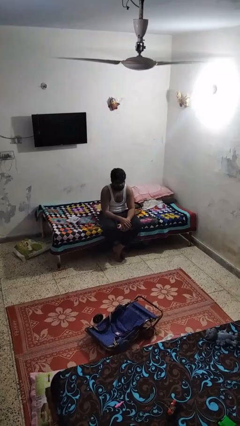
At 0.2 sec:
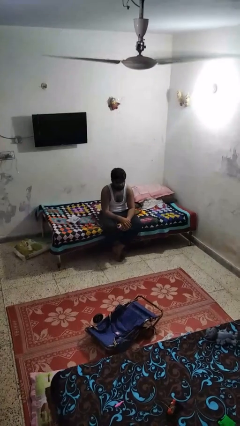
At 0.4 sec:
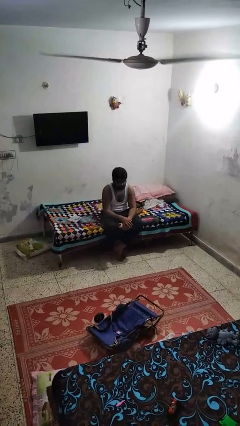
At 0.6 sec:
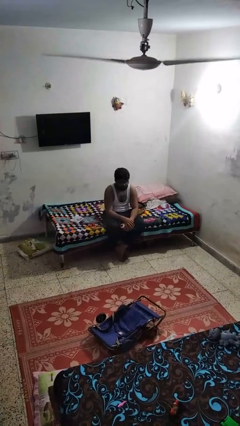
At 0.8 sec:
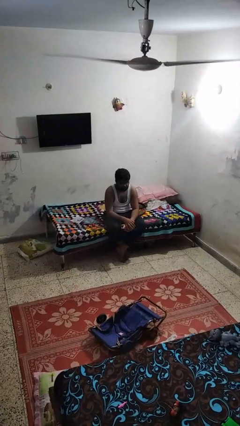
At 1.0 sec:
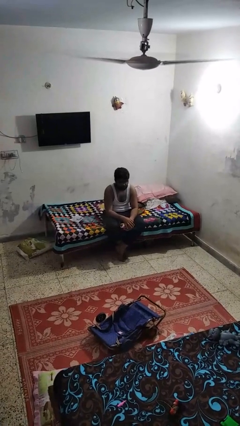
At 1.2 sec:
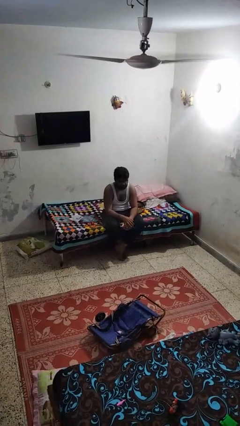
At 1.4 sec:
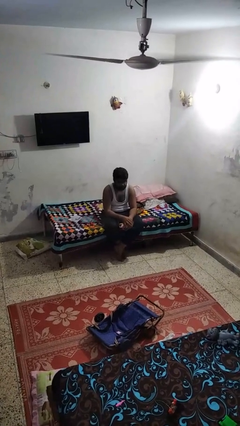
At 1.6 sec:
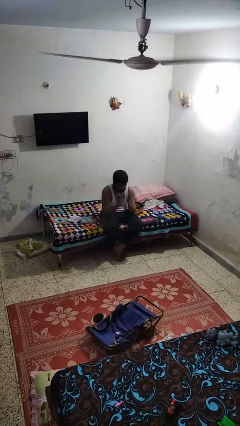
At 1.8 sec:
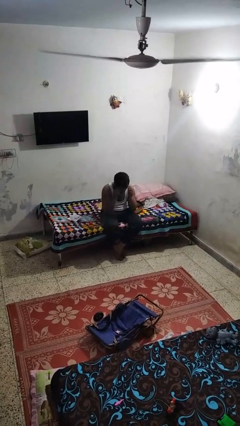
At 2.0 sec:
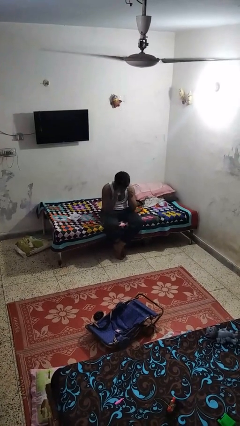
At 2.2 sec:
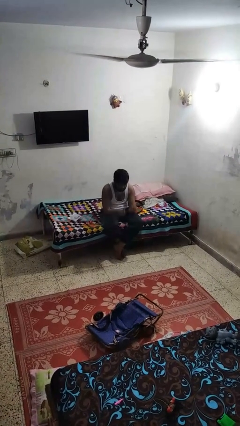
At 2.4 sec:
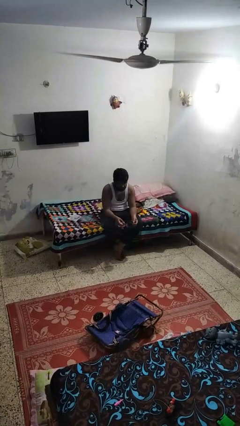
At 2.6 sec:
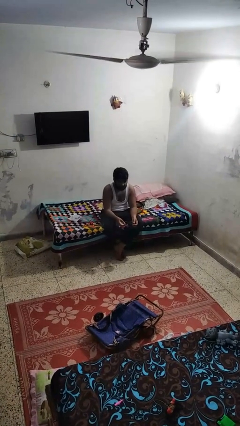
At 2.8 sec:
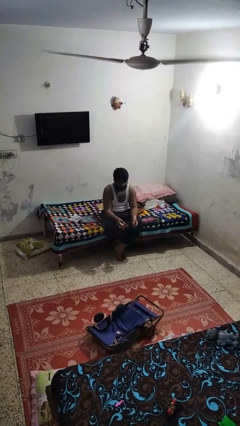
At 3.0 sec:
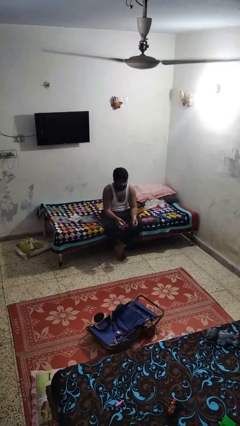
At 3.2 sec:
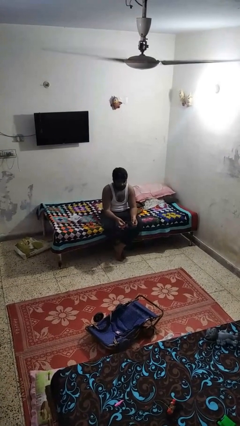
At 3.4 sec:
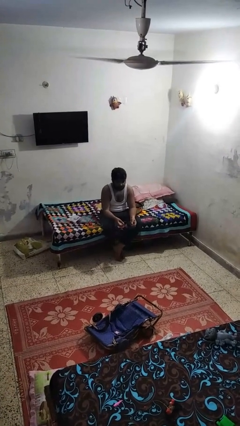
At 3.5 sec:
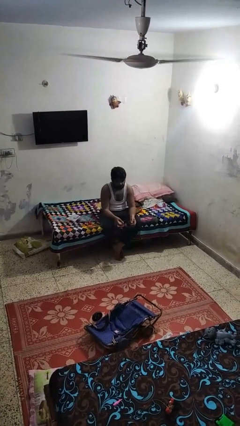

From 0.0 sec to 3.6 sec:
person takes off glasses

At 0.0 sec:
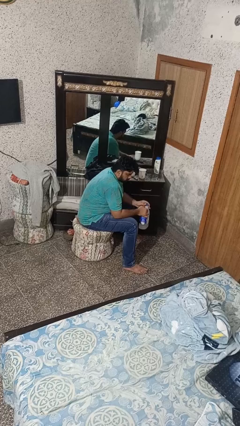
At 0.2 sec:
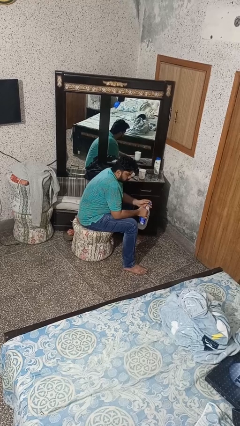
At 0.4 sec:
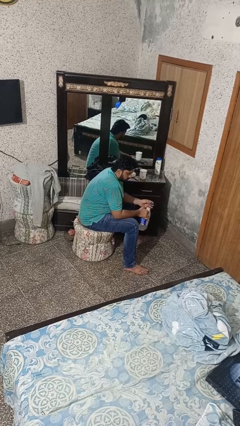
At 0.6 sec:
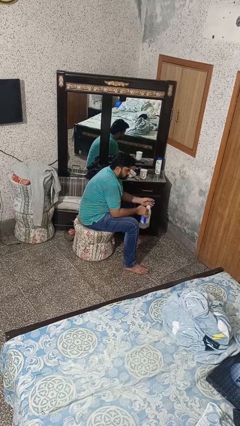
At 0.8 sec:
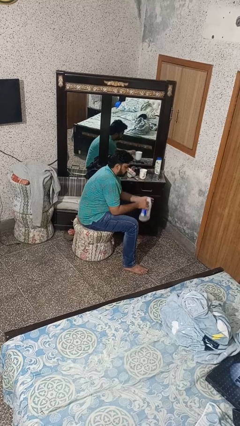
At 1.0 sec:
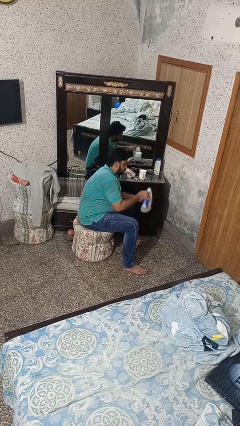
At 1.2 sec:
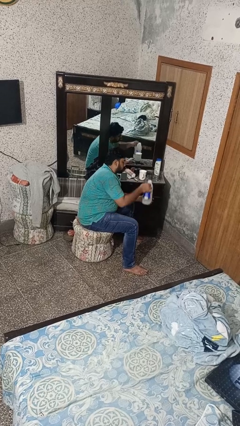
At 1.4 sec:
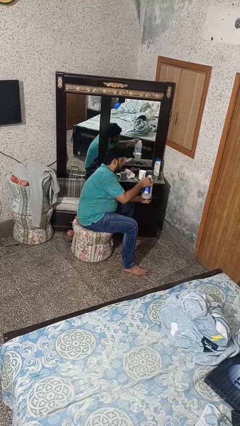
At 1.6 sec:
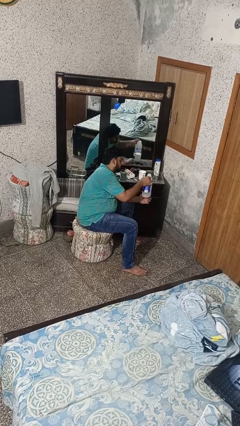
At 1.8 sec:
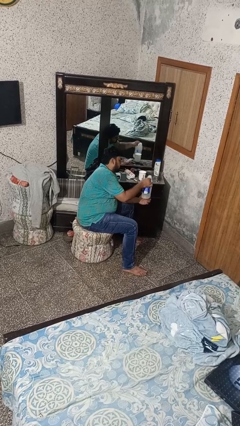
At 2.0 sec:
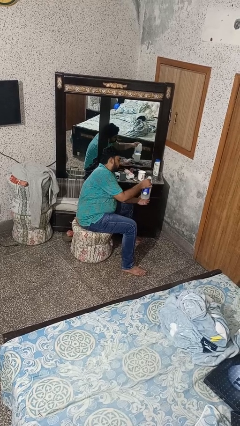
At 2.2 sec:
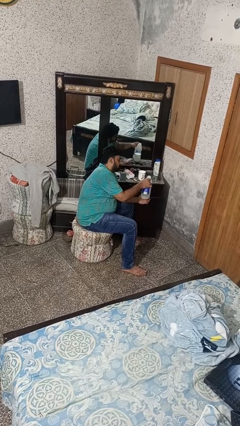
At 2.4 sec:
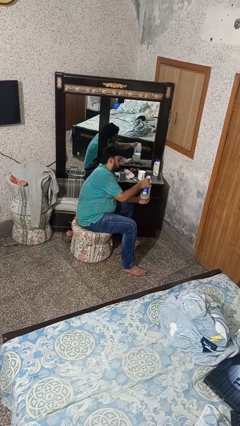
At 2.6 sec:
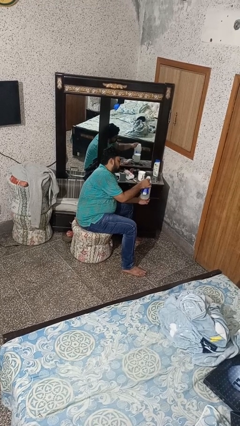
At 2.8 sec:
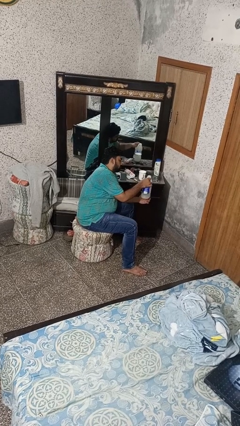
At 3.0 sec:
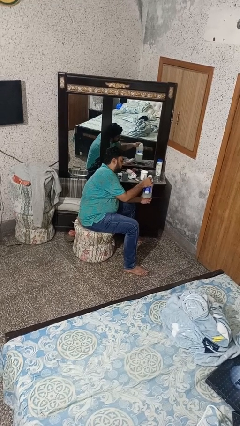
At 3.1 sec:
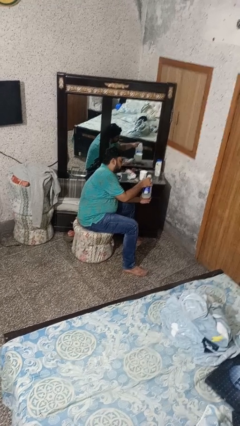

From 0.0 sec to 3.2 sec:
person unscrews lid from bottle

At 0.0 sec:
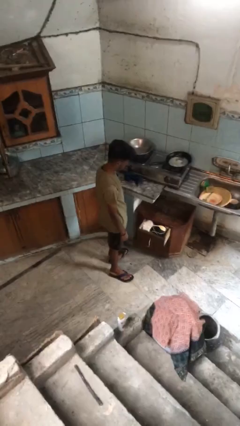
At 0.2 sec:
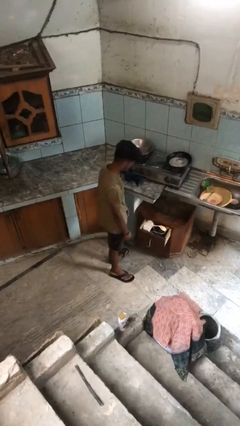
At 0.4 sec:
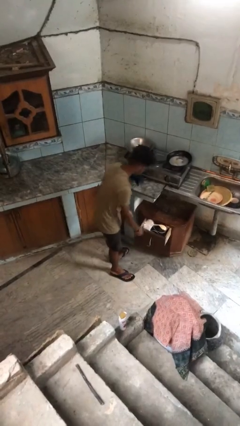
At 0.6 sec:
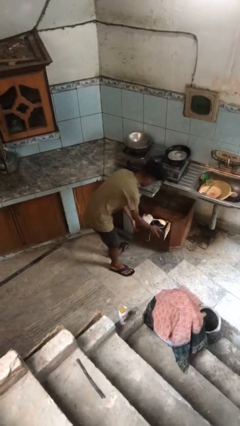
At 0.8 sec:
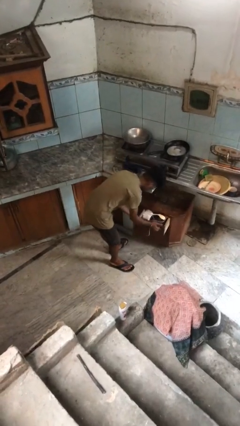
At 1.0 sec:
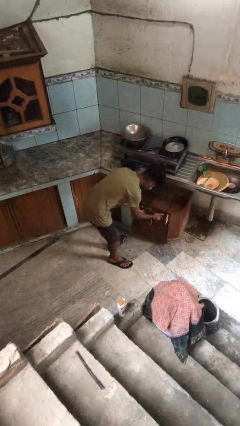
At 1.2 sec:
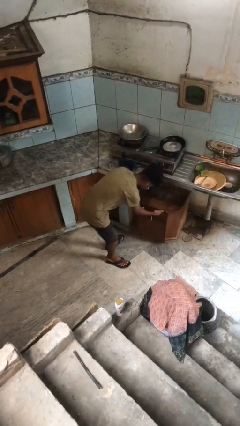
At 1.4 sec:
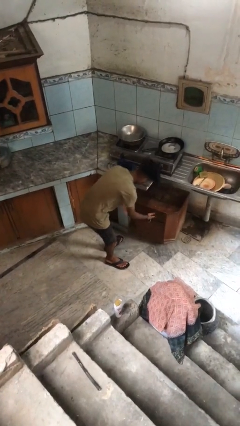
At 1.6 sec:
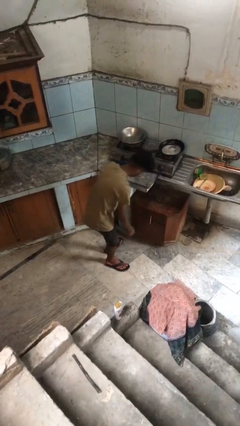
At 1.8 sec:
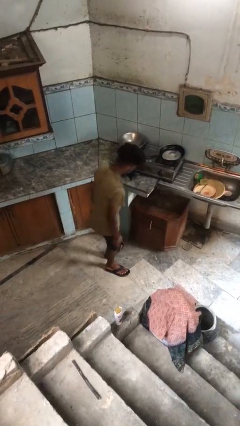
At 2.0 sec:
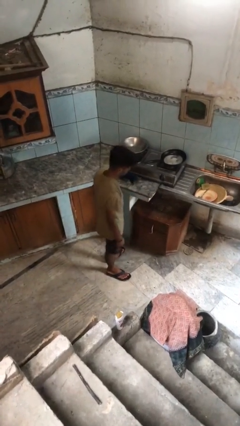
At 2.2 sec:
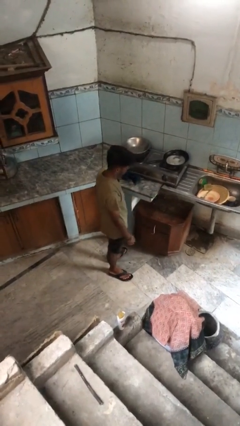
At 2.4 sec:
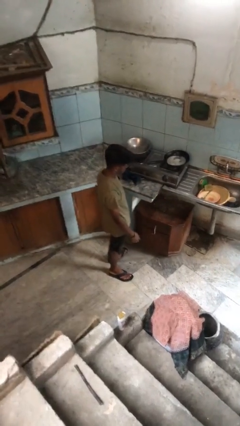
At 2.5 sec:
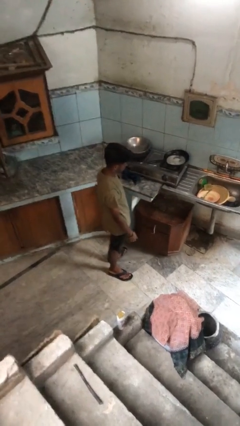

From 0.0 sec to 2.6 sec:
person closes kitchen drawer

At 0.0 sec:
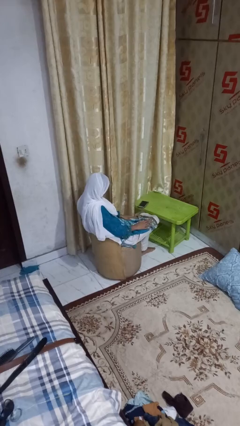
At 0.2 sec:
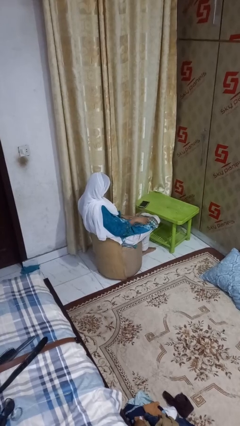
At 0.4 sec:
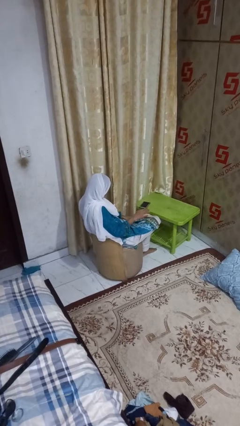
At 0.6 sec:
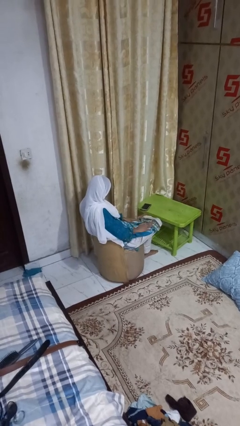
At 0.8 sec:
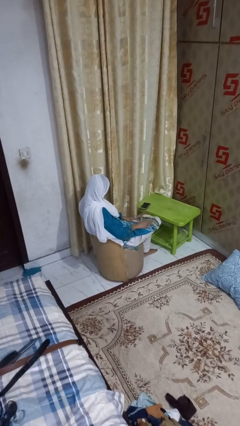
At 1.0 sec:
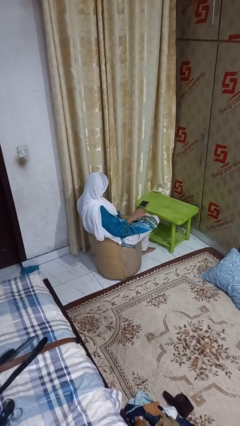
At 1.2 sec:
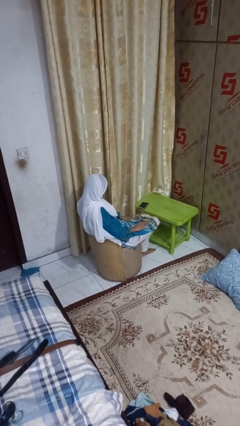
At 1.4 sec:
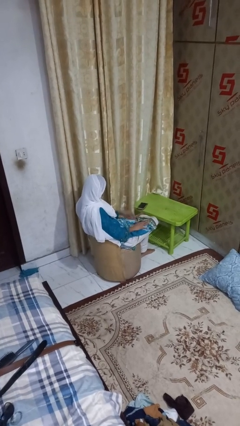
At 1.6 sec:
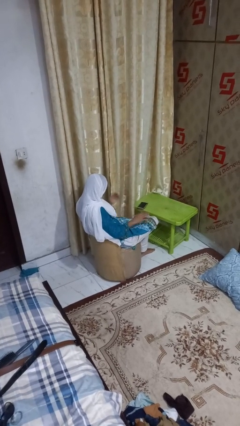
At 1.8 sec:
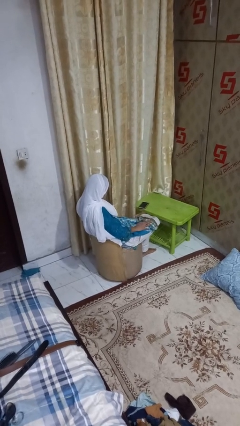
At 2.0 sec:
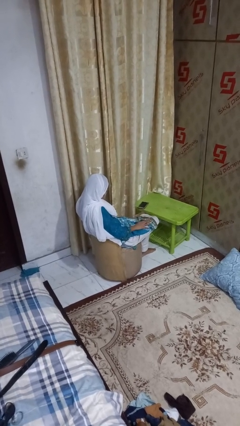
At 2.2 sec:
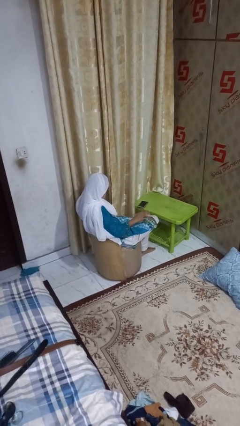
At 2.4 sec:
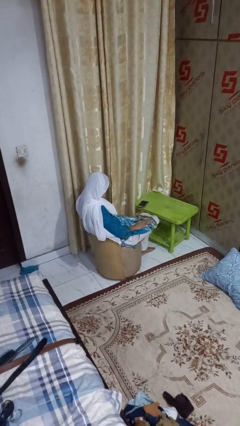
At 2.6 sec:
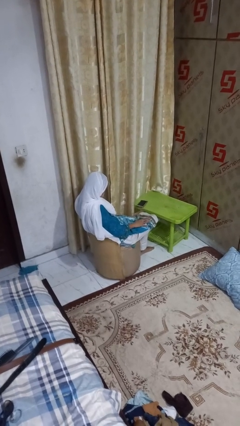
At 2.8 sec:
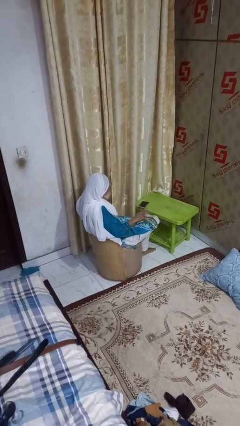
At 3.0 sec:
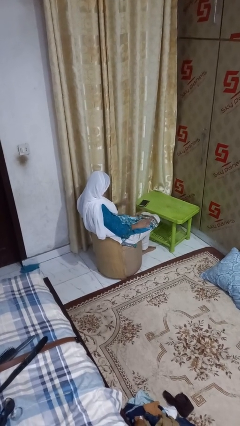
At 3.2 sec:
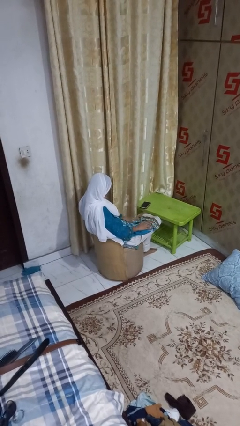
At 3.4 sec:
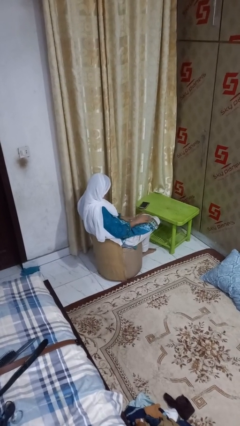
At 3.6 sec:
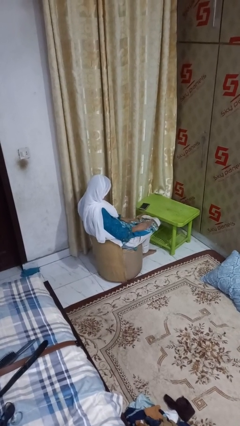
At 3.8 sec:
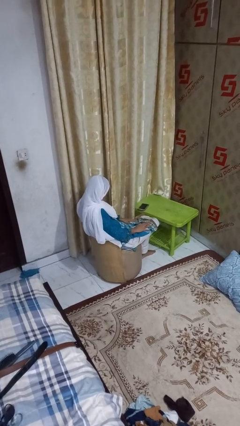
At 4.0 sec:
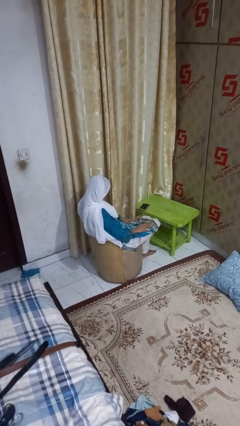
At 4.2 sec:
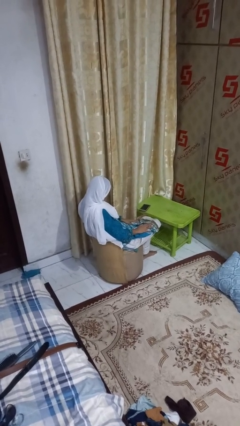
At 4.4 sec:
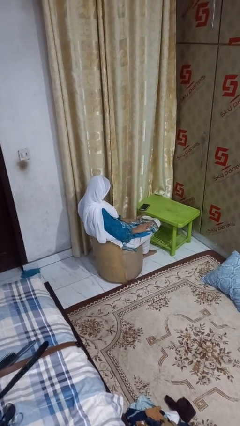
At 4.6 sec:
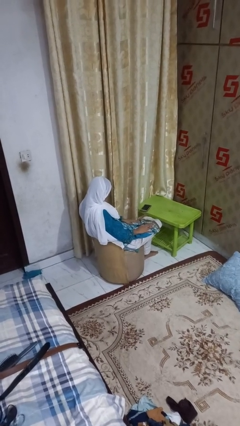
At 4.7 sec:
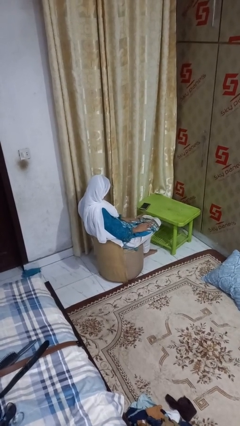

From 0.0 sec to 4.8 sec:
person slaps hands on thighs

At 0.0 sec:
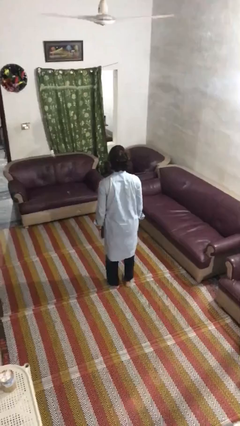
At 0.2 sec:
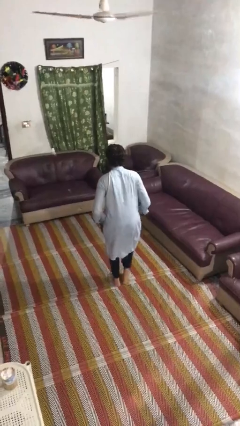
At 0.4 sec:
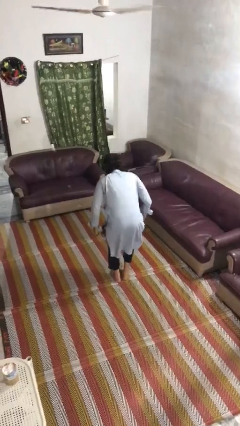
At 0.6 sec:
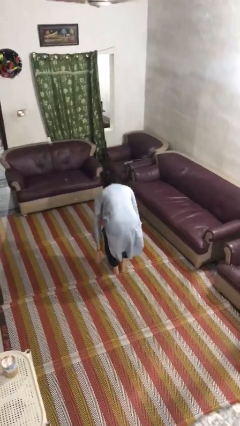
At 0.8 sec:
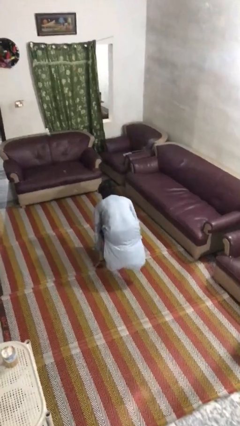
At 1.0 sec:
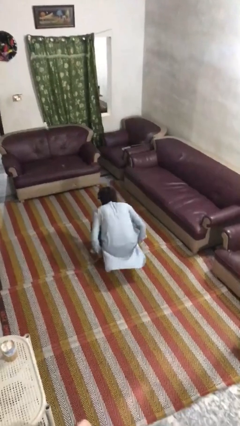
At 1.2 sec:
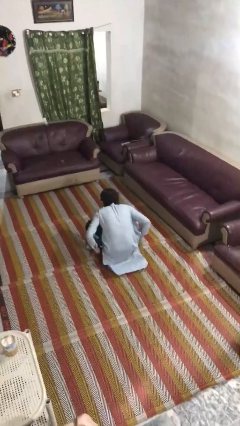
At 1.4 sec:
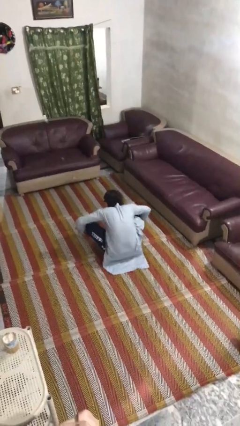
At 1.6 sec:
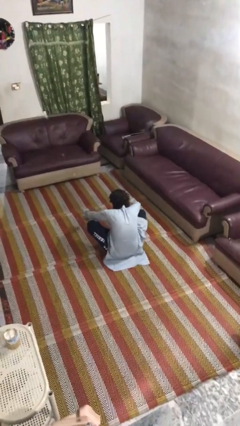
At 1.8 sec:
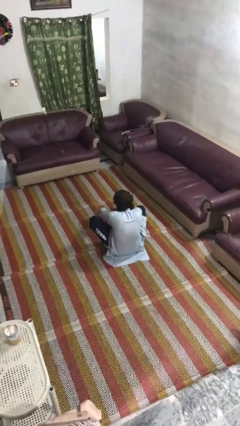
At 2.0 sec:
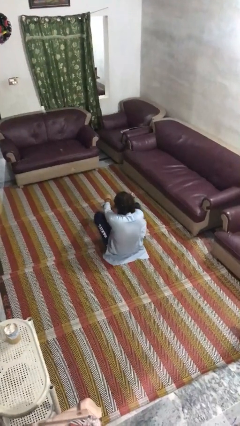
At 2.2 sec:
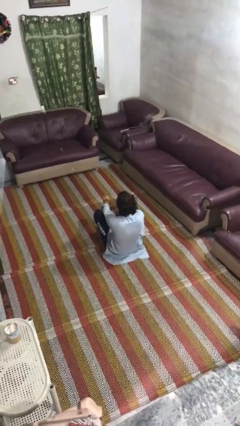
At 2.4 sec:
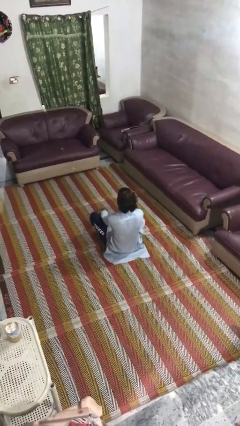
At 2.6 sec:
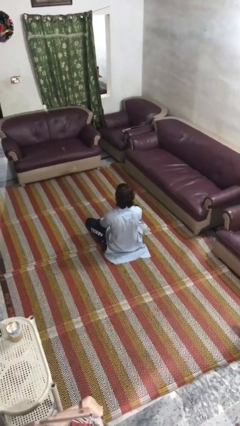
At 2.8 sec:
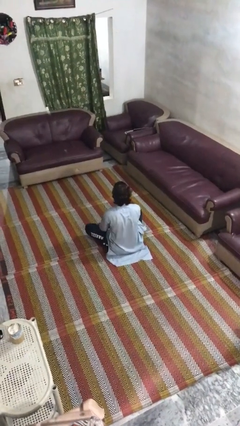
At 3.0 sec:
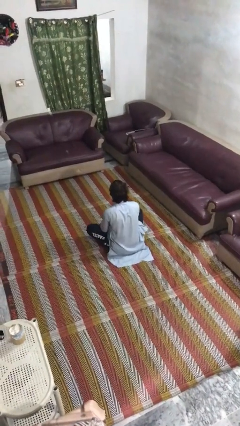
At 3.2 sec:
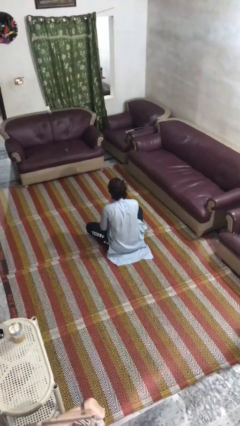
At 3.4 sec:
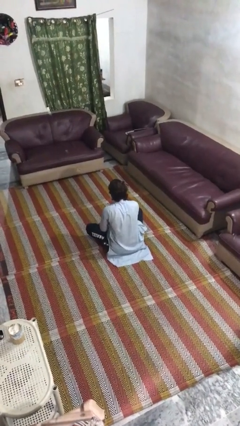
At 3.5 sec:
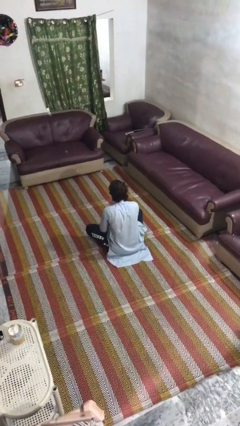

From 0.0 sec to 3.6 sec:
person sits crisscross
